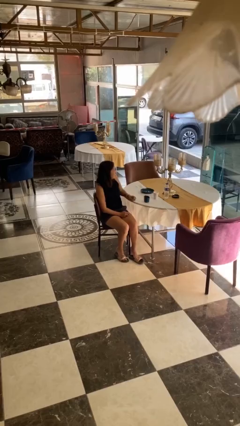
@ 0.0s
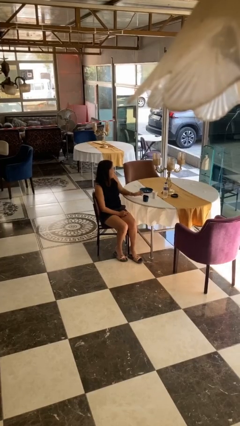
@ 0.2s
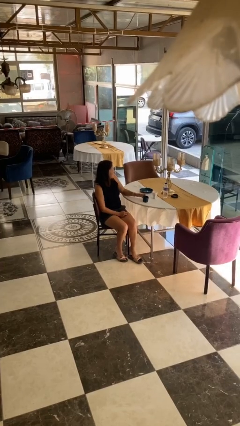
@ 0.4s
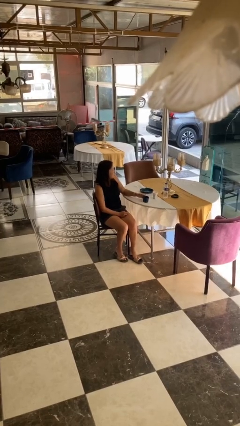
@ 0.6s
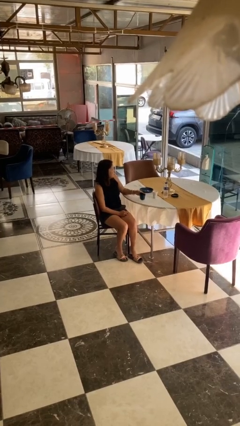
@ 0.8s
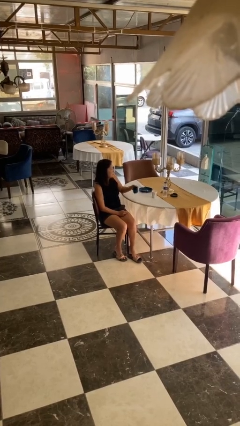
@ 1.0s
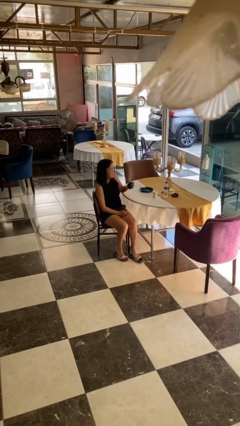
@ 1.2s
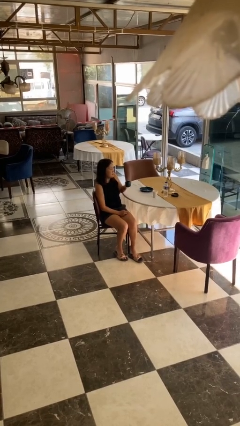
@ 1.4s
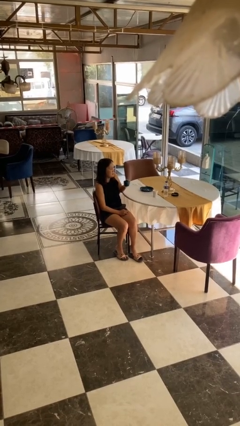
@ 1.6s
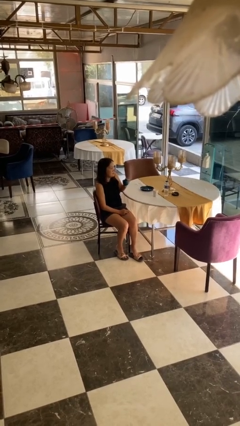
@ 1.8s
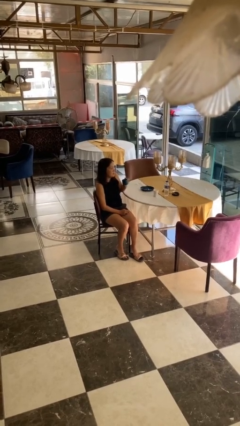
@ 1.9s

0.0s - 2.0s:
person picks up object from table

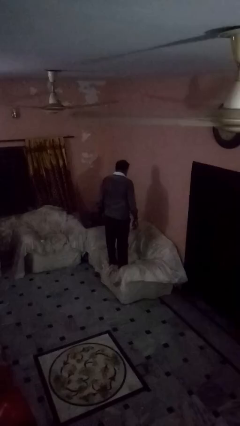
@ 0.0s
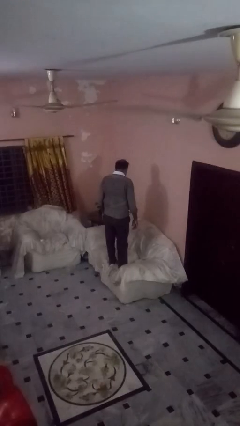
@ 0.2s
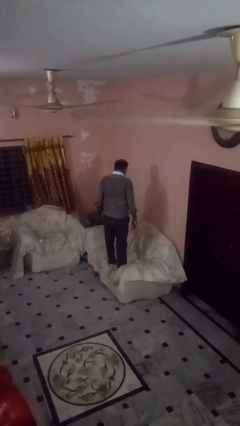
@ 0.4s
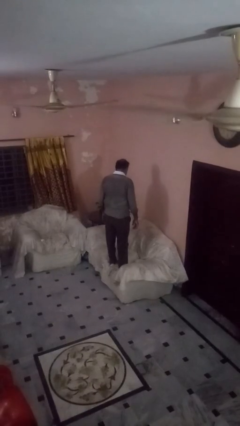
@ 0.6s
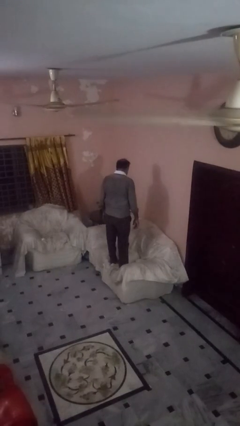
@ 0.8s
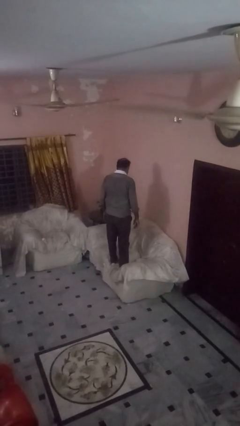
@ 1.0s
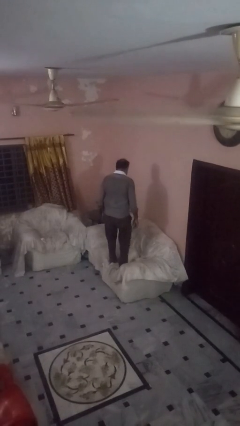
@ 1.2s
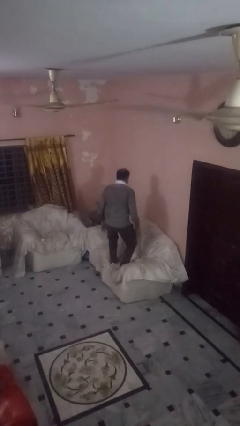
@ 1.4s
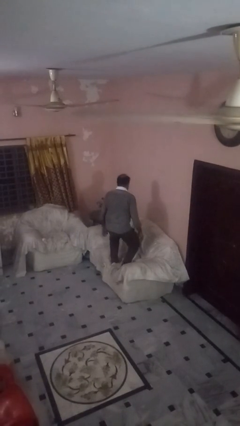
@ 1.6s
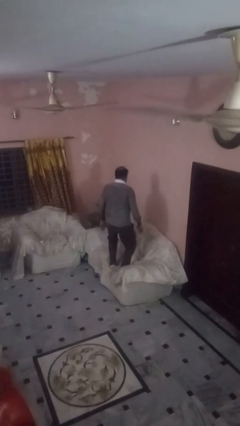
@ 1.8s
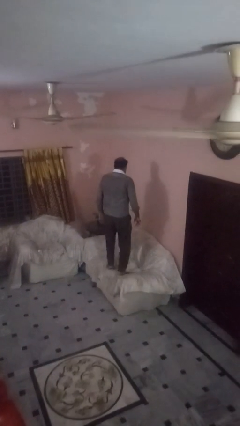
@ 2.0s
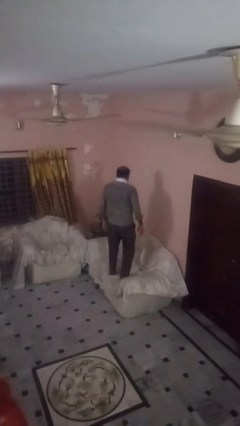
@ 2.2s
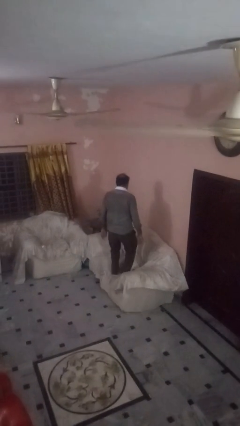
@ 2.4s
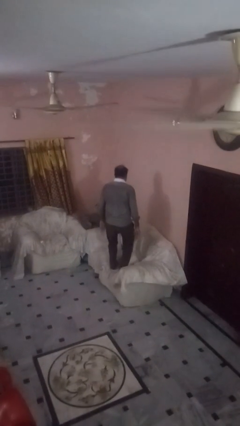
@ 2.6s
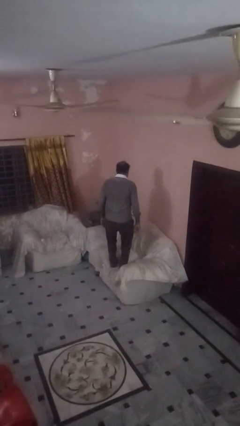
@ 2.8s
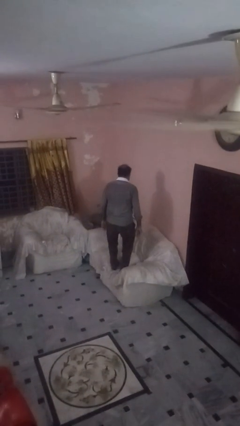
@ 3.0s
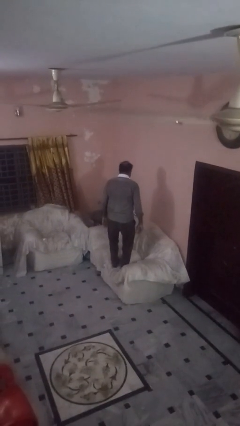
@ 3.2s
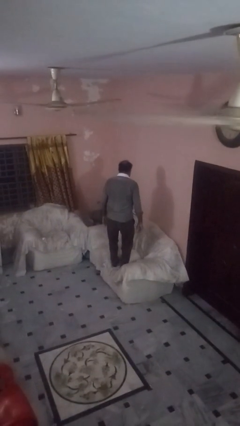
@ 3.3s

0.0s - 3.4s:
person jumps on couch

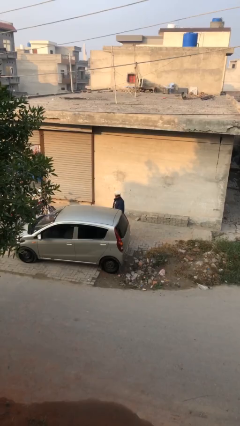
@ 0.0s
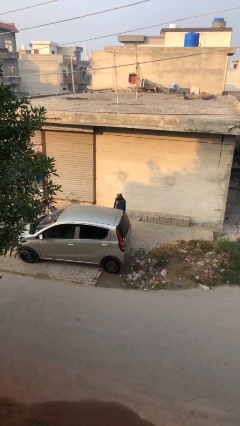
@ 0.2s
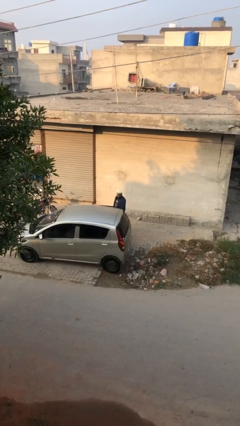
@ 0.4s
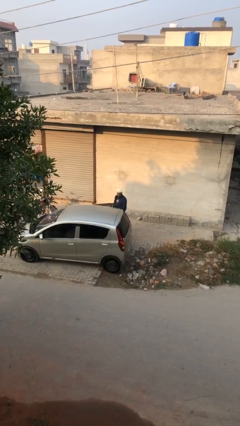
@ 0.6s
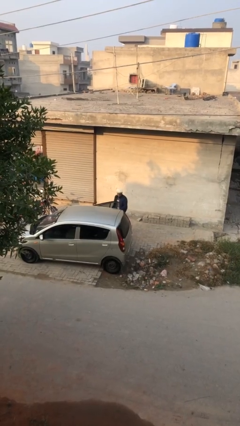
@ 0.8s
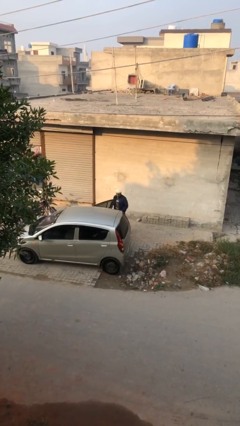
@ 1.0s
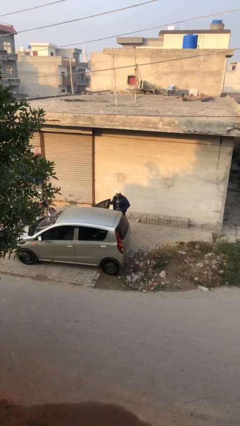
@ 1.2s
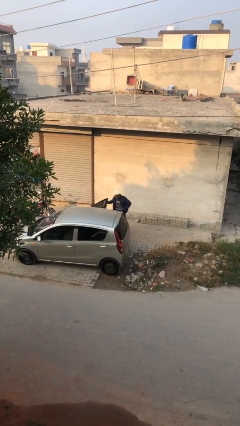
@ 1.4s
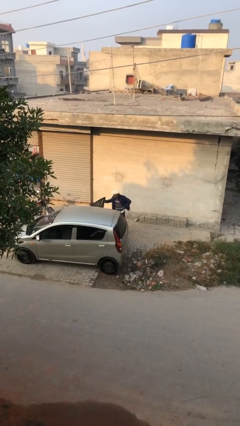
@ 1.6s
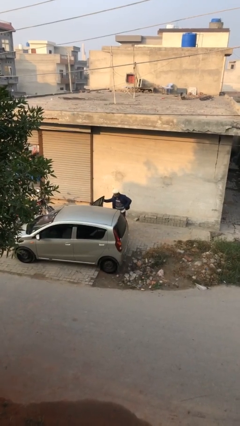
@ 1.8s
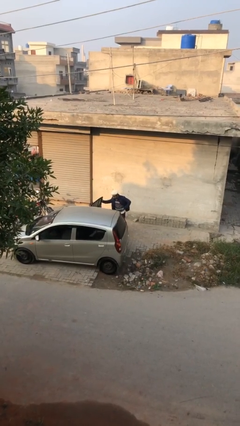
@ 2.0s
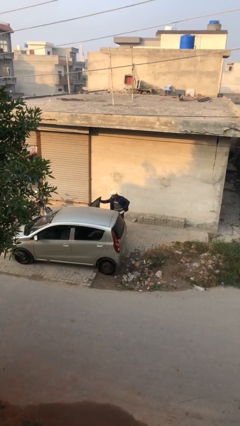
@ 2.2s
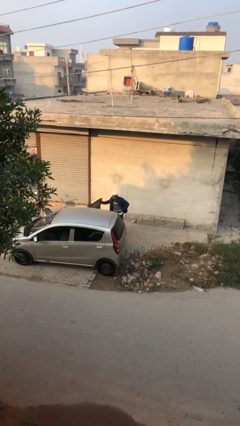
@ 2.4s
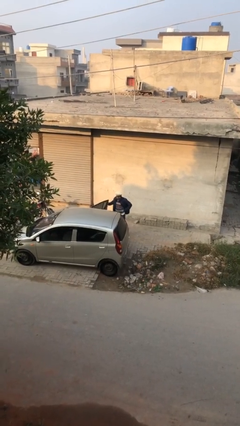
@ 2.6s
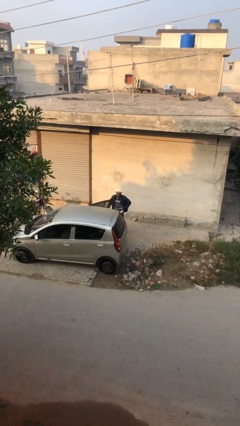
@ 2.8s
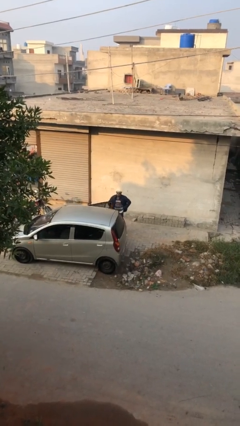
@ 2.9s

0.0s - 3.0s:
person opens car door

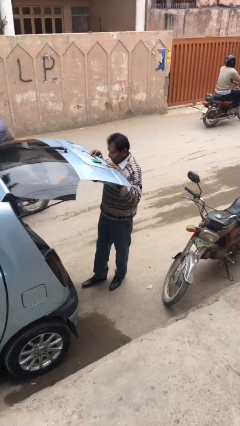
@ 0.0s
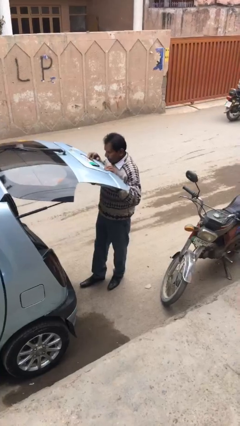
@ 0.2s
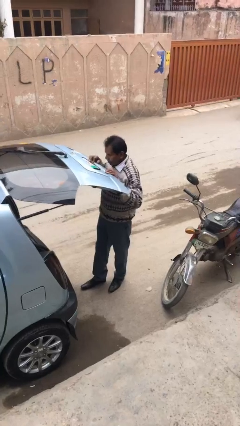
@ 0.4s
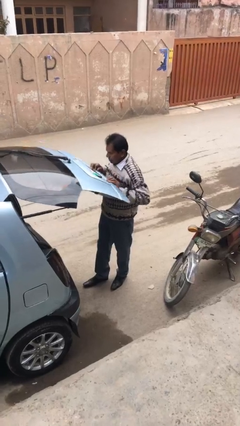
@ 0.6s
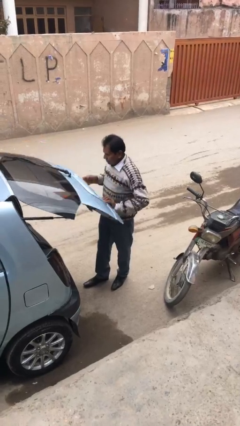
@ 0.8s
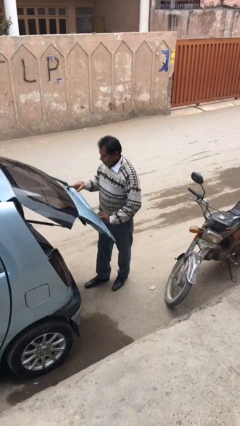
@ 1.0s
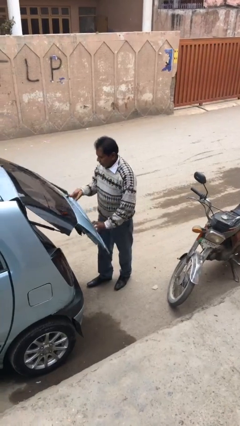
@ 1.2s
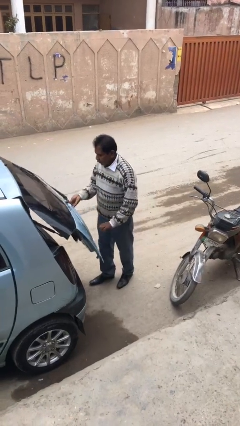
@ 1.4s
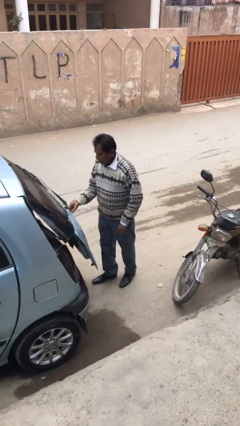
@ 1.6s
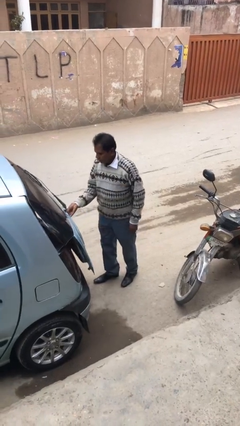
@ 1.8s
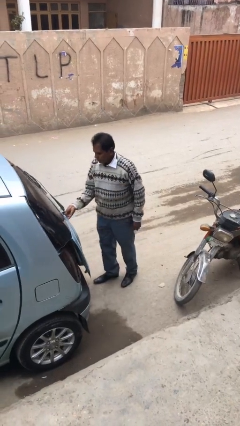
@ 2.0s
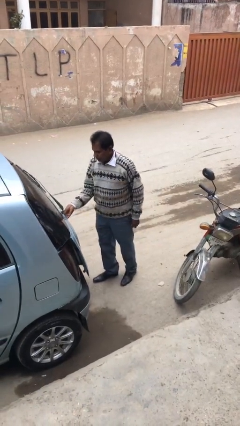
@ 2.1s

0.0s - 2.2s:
person closes car trunk

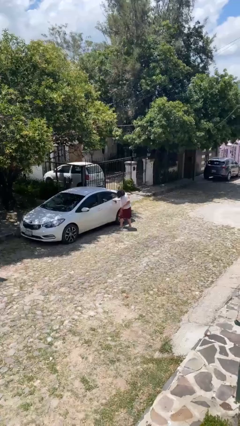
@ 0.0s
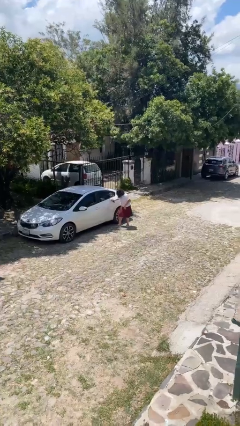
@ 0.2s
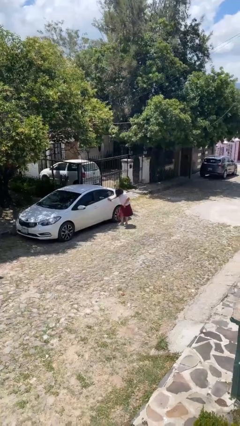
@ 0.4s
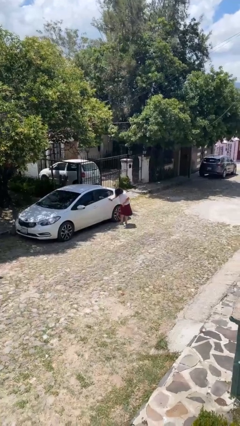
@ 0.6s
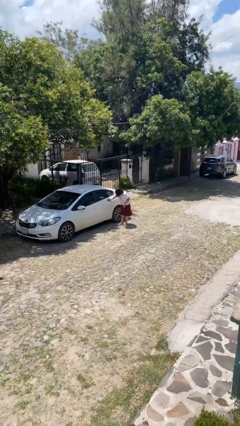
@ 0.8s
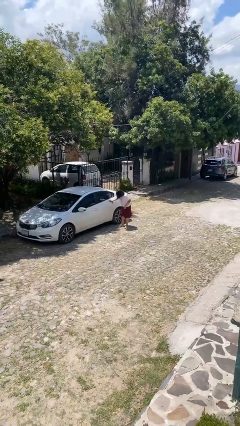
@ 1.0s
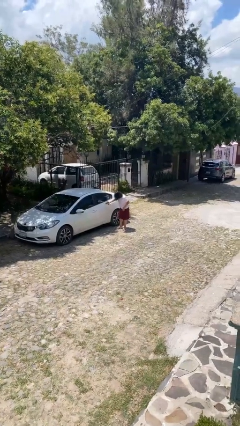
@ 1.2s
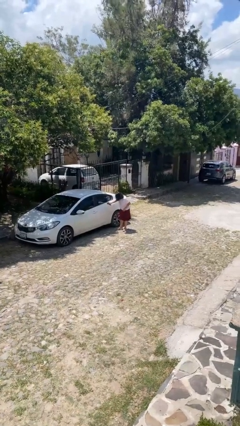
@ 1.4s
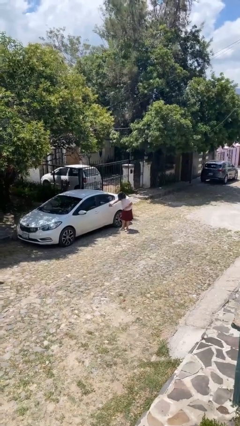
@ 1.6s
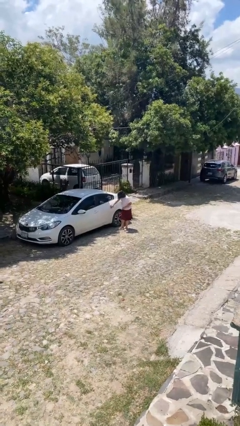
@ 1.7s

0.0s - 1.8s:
person polishes car with rag

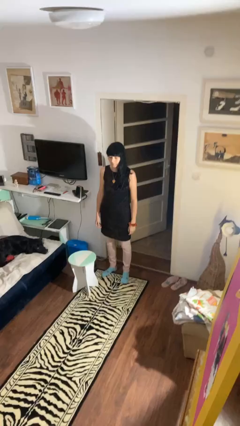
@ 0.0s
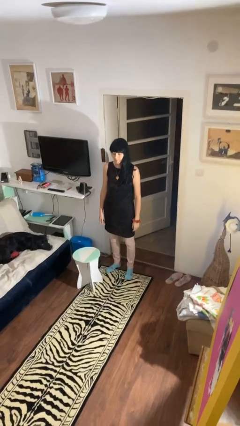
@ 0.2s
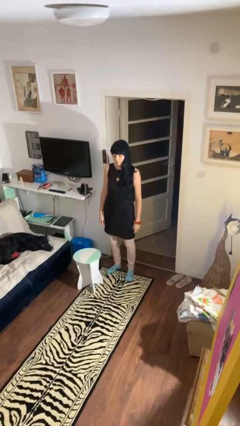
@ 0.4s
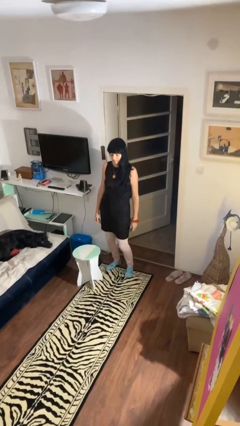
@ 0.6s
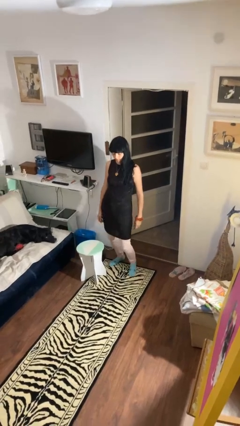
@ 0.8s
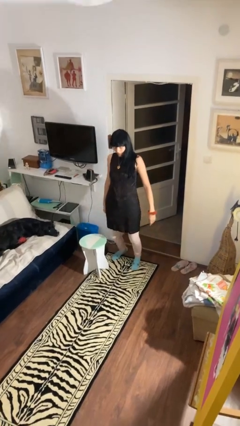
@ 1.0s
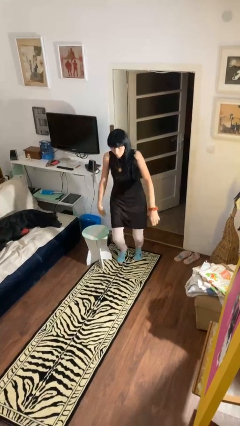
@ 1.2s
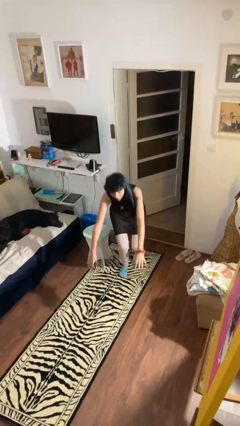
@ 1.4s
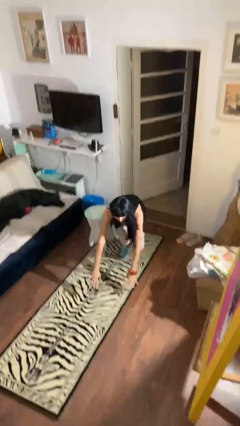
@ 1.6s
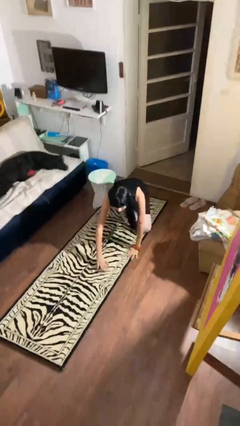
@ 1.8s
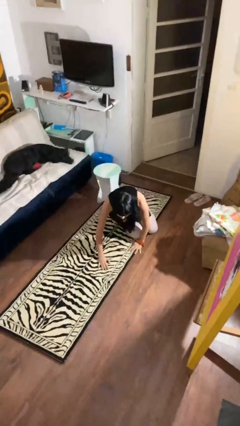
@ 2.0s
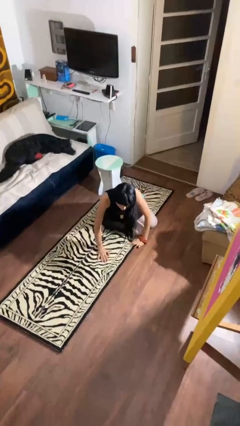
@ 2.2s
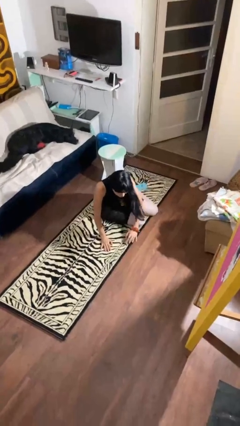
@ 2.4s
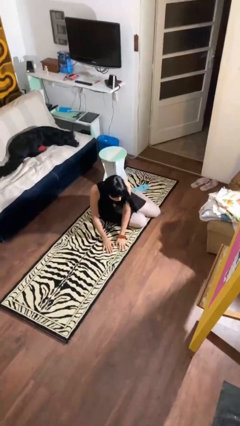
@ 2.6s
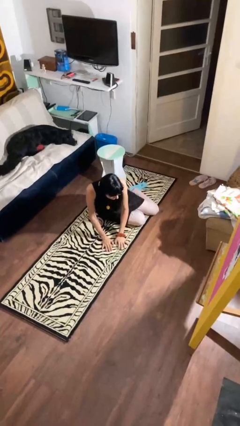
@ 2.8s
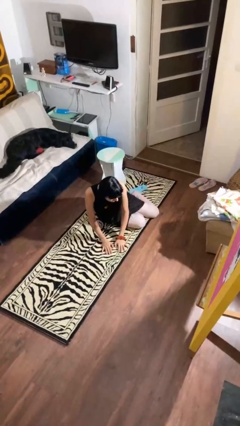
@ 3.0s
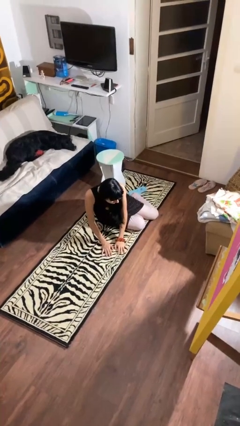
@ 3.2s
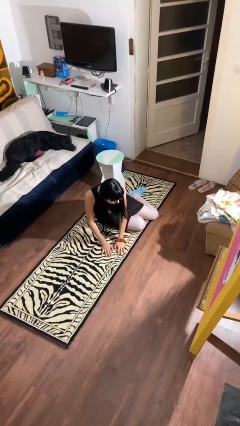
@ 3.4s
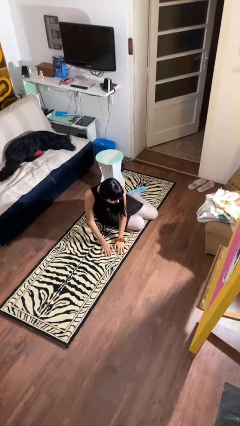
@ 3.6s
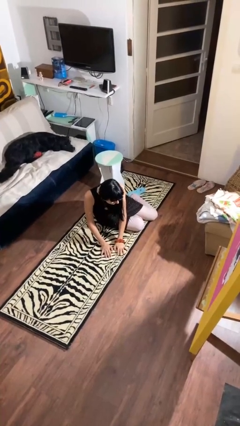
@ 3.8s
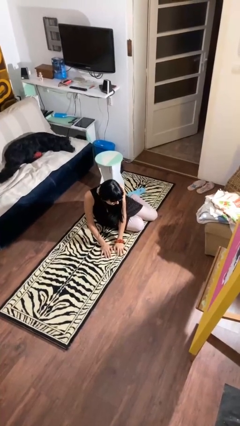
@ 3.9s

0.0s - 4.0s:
person trips on object on floor

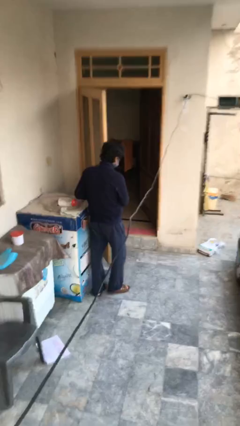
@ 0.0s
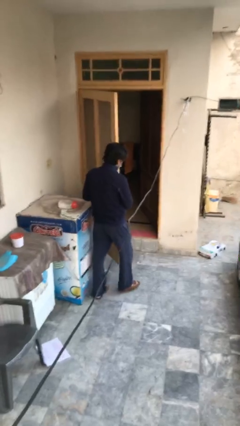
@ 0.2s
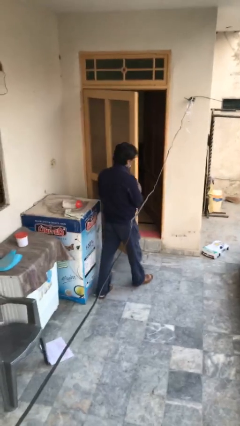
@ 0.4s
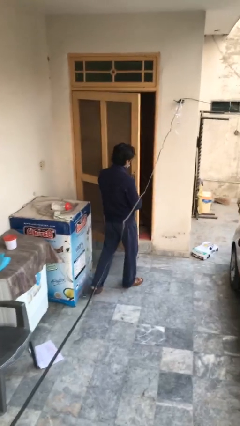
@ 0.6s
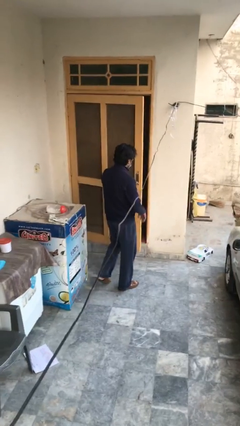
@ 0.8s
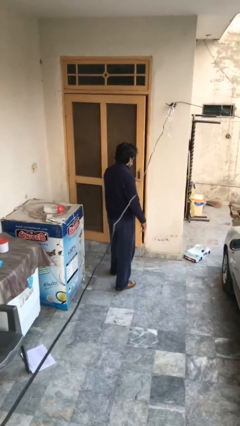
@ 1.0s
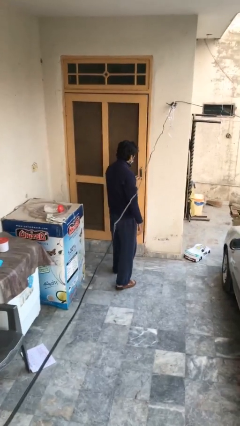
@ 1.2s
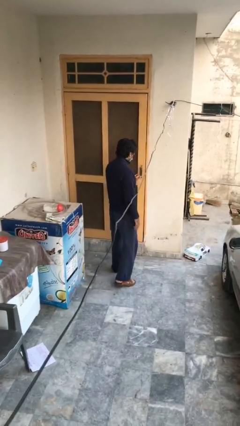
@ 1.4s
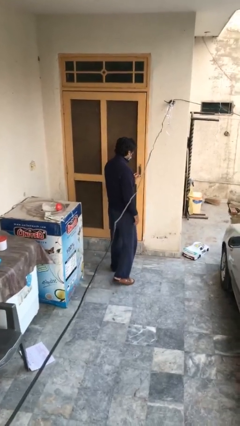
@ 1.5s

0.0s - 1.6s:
person closes facility door
